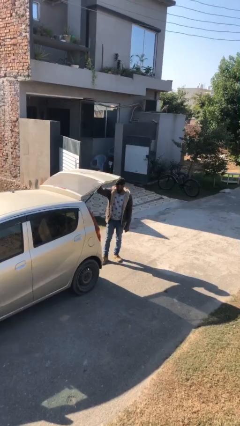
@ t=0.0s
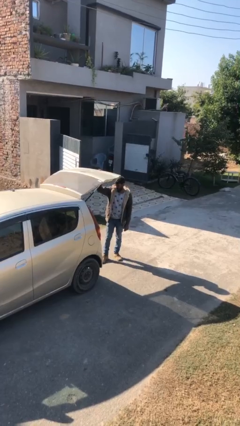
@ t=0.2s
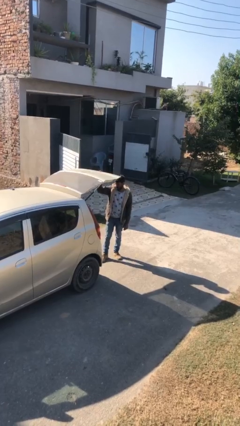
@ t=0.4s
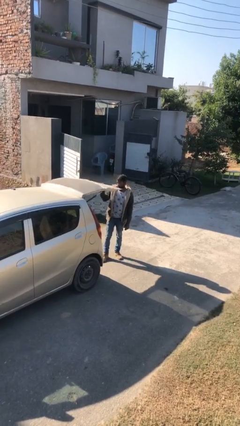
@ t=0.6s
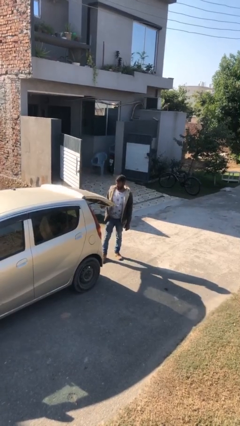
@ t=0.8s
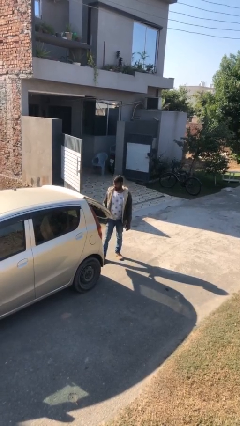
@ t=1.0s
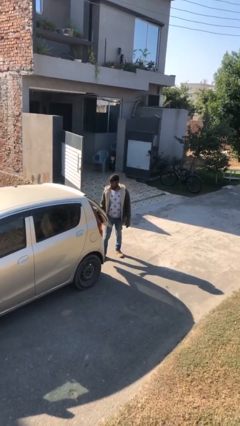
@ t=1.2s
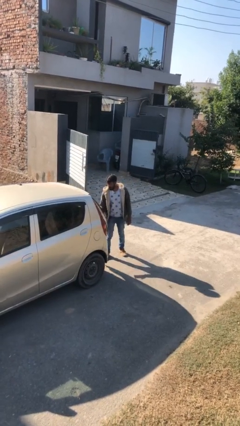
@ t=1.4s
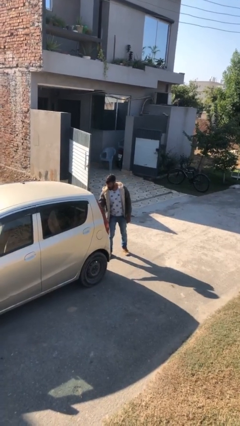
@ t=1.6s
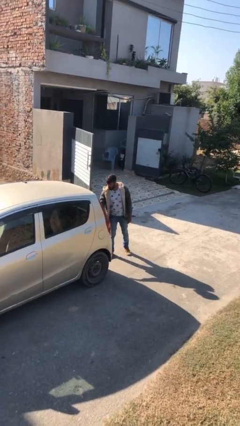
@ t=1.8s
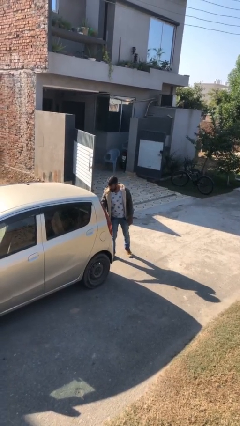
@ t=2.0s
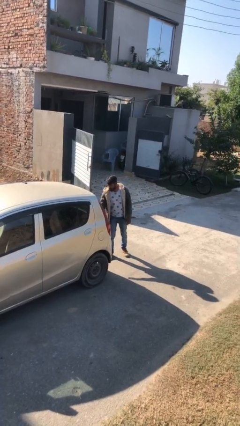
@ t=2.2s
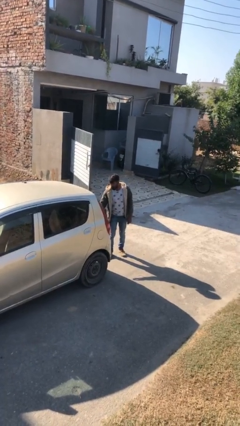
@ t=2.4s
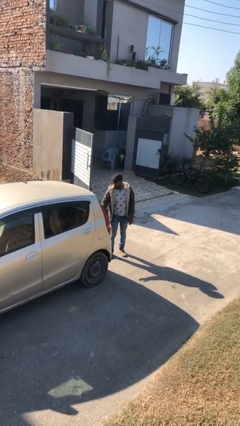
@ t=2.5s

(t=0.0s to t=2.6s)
person closes car trunk

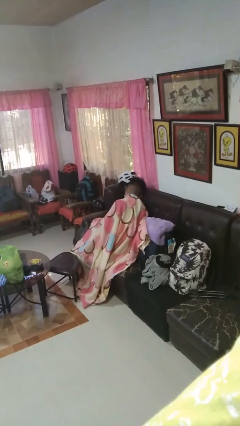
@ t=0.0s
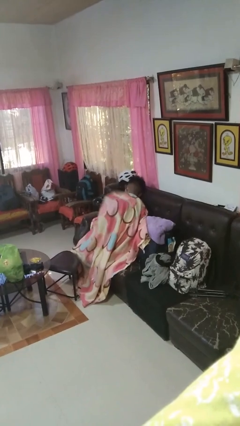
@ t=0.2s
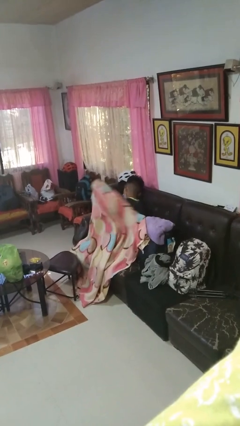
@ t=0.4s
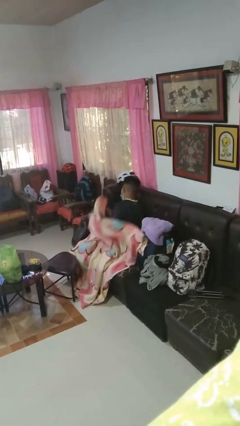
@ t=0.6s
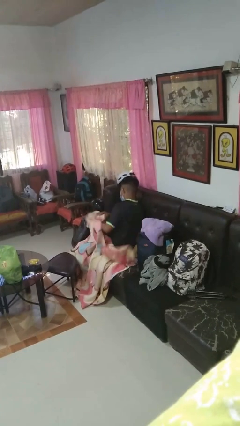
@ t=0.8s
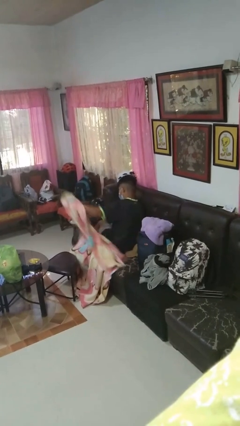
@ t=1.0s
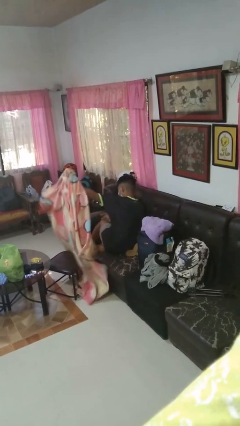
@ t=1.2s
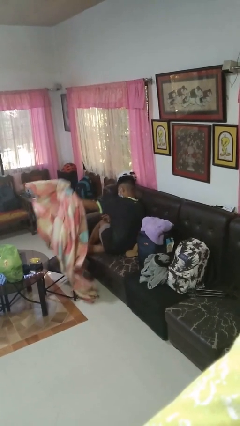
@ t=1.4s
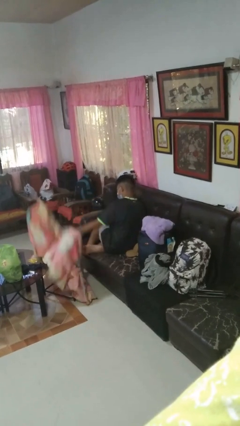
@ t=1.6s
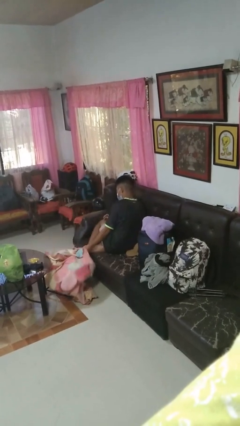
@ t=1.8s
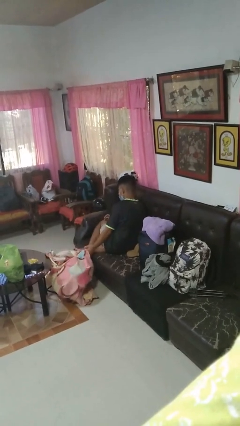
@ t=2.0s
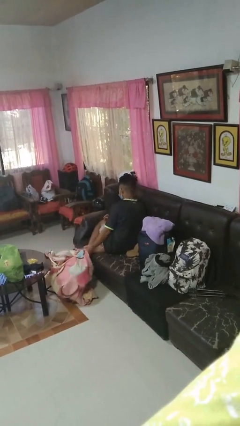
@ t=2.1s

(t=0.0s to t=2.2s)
person uncovers with blanket

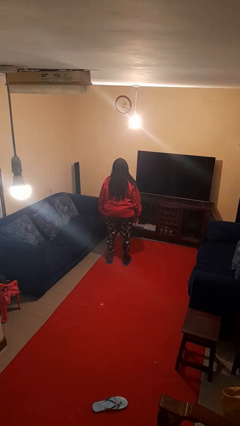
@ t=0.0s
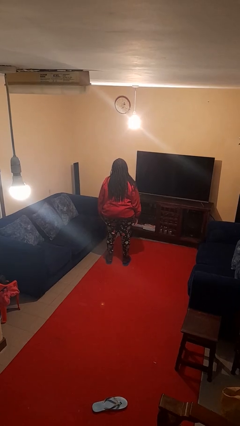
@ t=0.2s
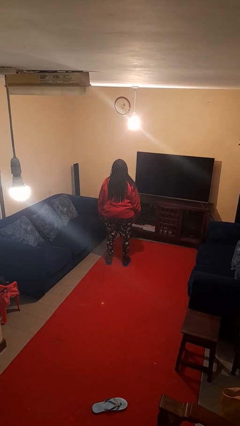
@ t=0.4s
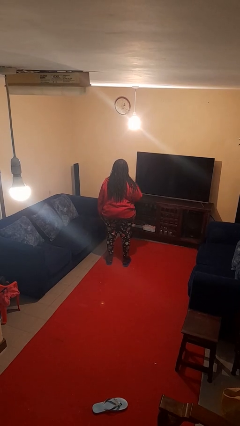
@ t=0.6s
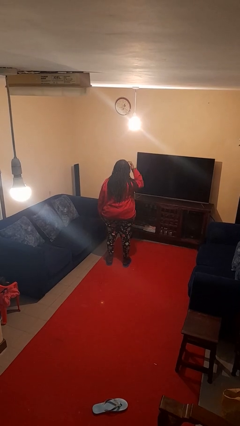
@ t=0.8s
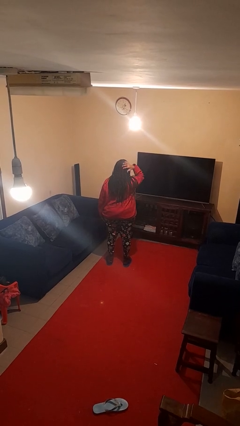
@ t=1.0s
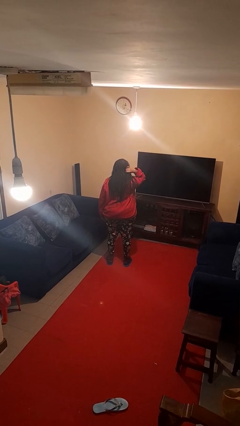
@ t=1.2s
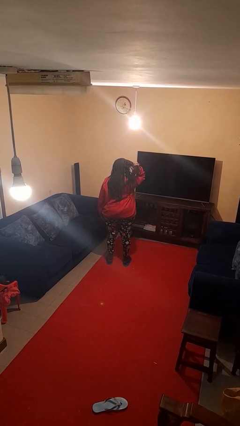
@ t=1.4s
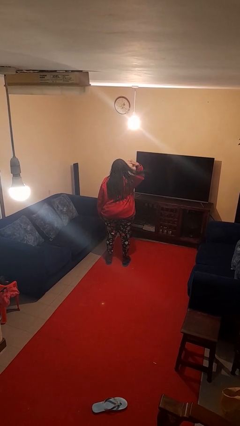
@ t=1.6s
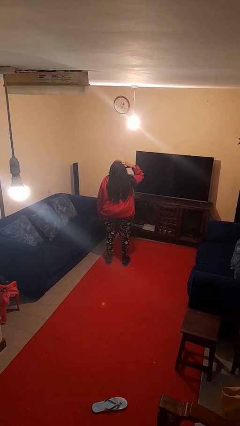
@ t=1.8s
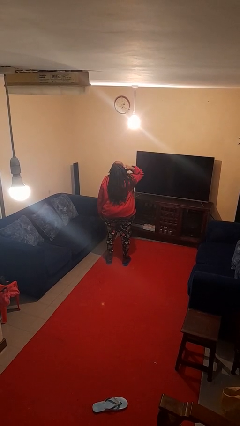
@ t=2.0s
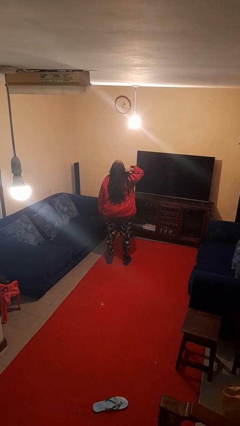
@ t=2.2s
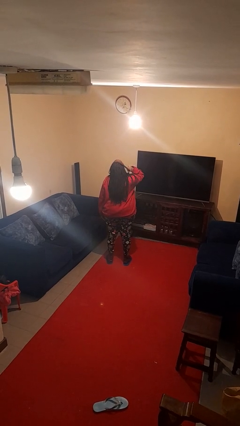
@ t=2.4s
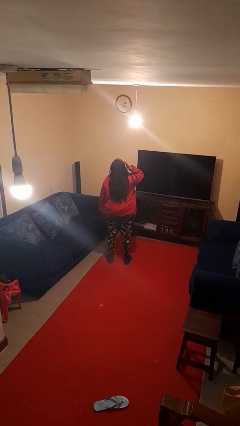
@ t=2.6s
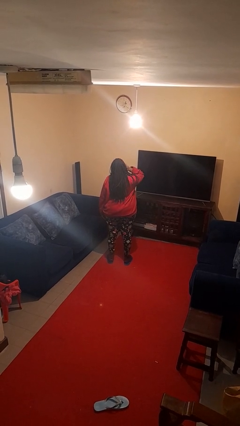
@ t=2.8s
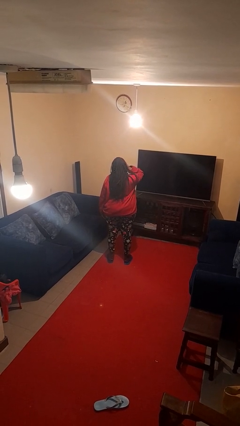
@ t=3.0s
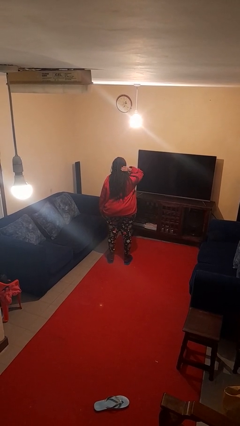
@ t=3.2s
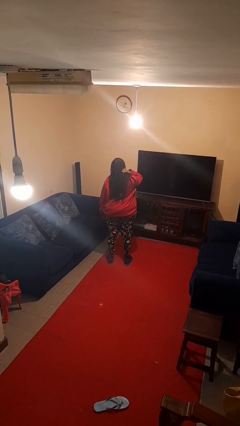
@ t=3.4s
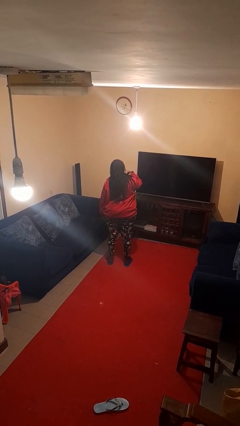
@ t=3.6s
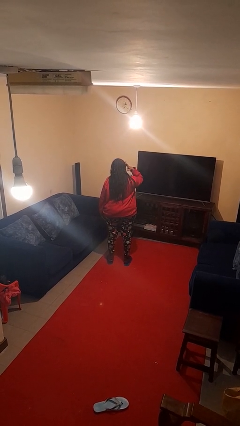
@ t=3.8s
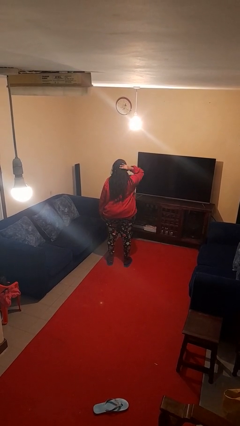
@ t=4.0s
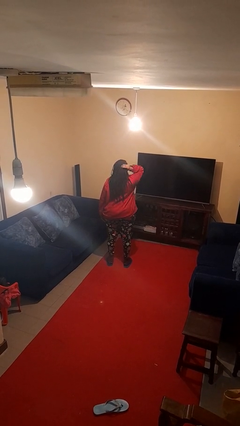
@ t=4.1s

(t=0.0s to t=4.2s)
person strokes hair

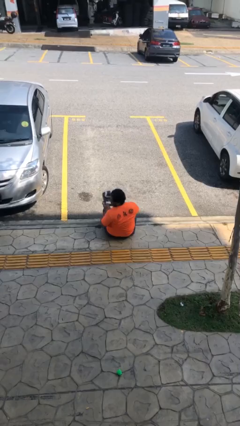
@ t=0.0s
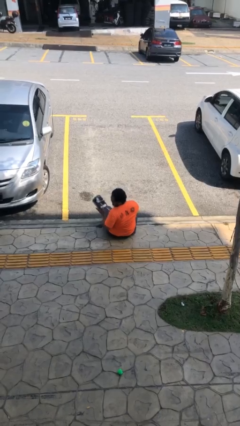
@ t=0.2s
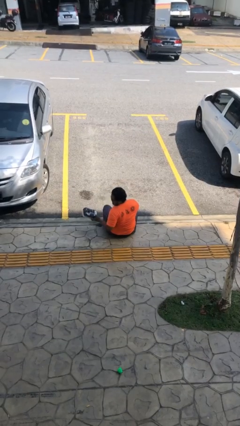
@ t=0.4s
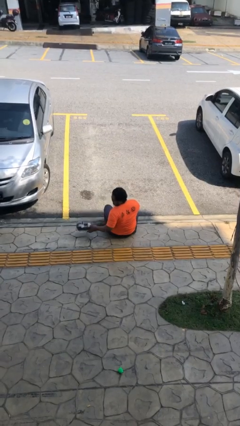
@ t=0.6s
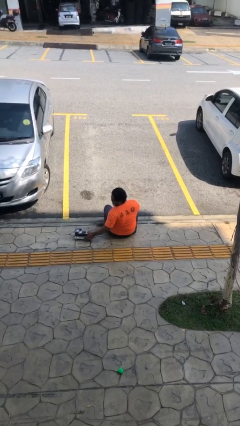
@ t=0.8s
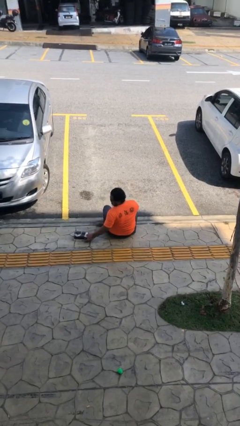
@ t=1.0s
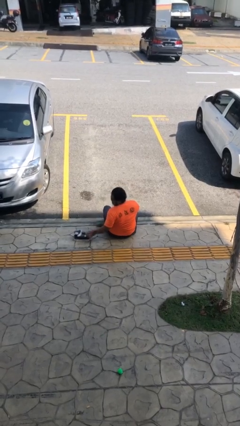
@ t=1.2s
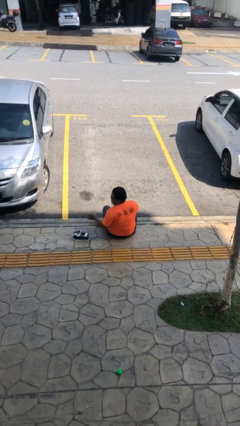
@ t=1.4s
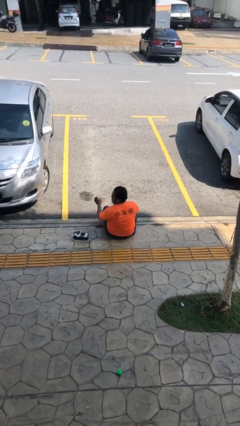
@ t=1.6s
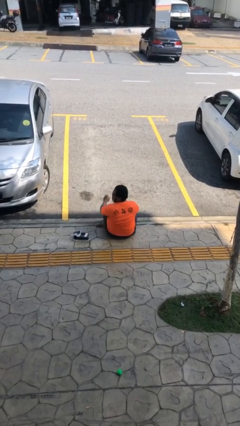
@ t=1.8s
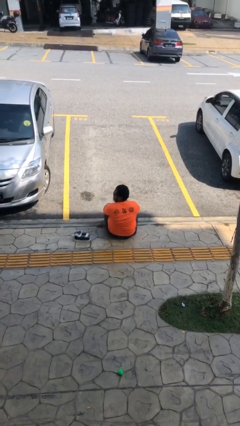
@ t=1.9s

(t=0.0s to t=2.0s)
person puts down object on floor

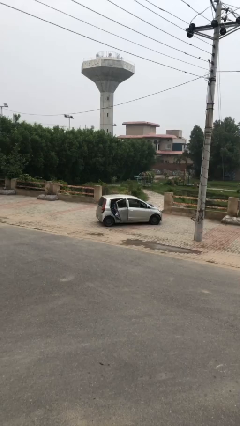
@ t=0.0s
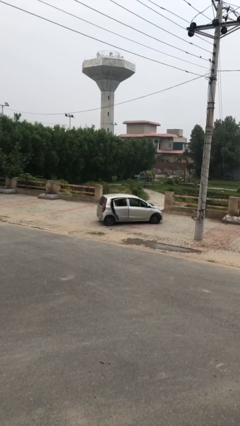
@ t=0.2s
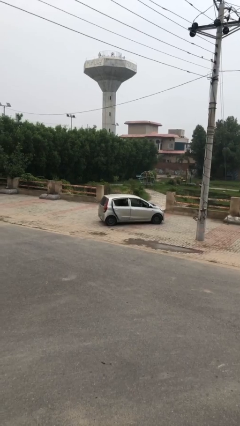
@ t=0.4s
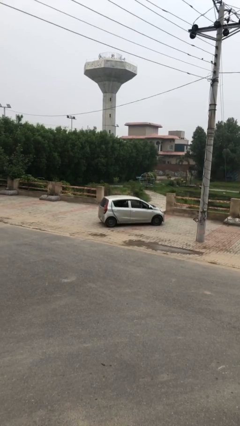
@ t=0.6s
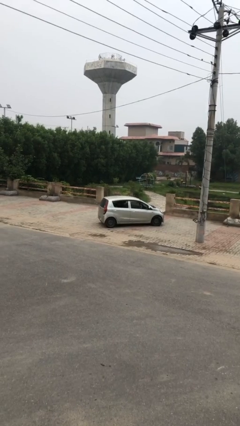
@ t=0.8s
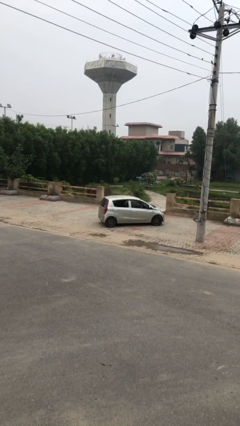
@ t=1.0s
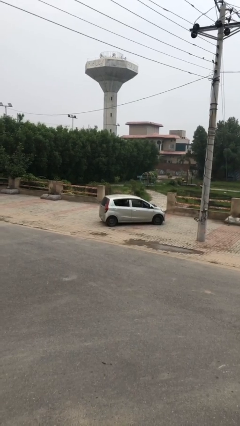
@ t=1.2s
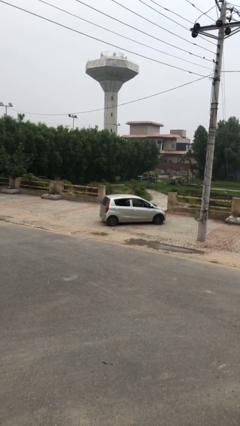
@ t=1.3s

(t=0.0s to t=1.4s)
person closes car door

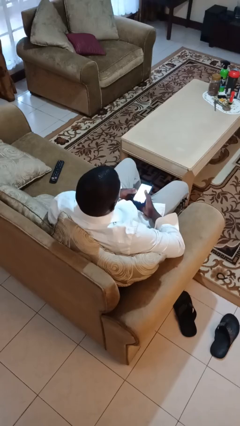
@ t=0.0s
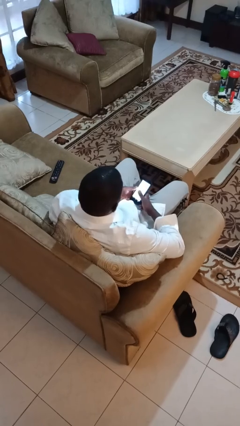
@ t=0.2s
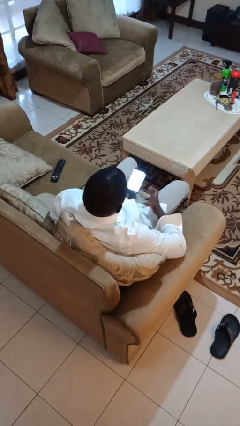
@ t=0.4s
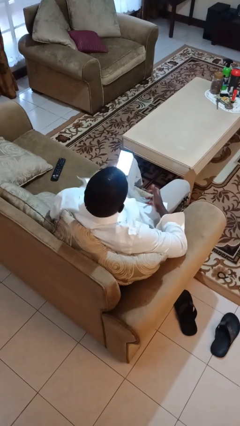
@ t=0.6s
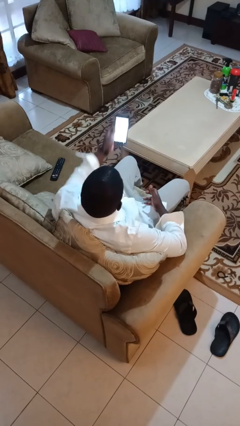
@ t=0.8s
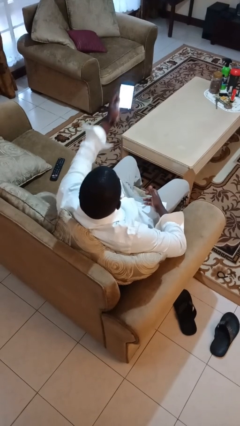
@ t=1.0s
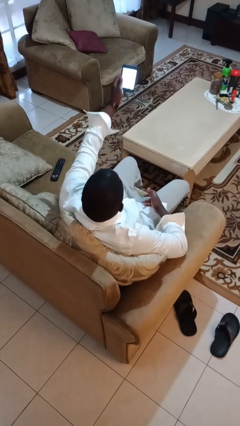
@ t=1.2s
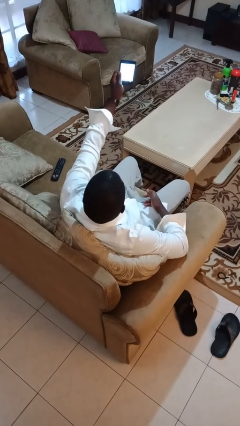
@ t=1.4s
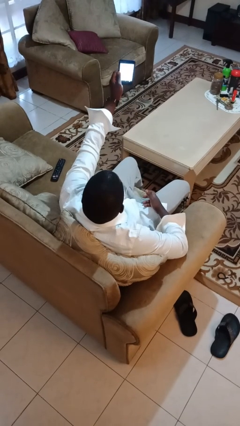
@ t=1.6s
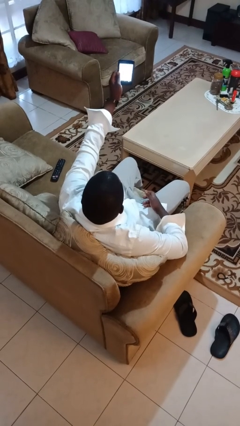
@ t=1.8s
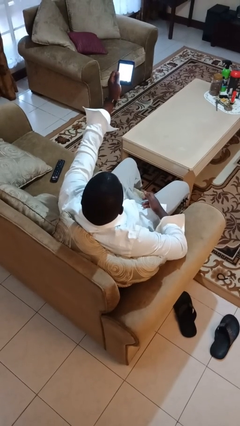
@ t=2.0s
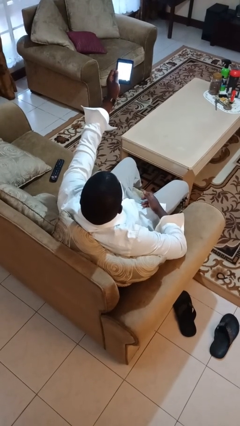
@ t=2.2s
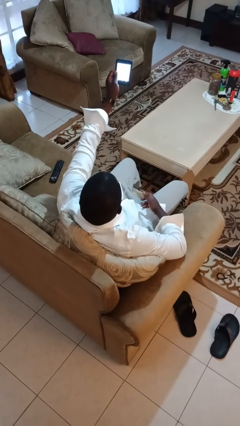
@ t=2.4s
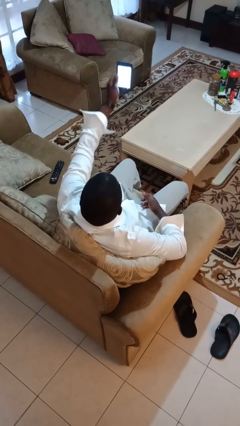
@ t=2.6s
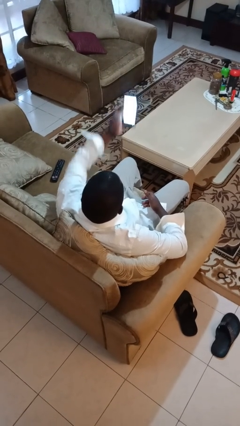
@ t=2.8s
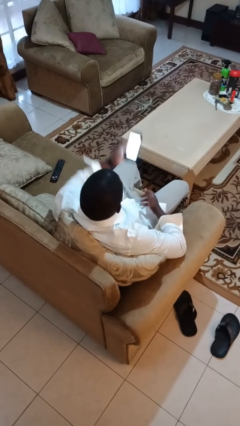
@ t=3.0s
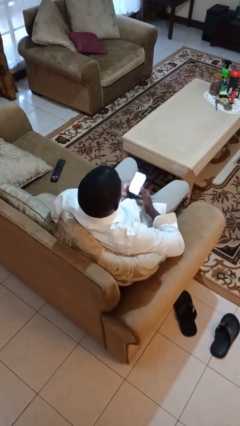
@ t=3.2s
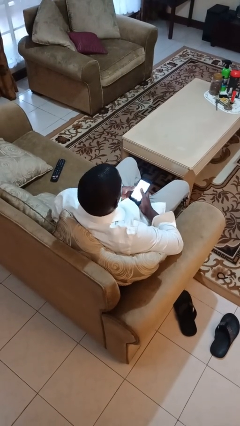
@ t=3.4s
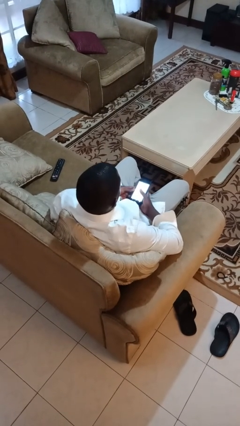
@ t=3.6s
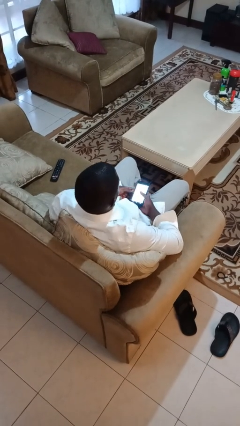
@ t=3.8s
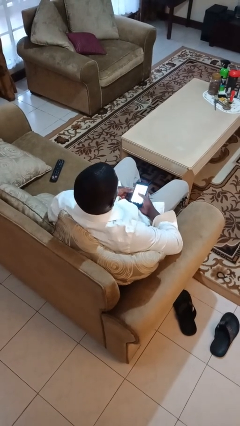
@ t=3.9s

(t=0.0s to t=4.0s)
person takes selfie

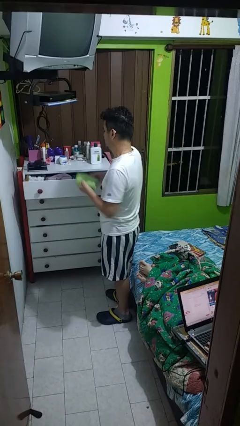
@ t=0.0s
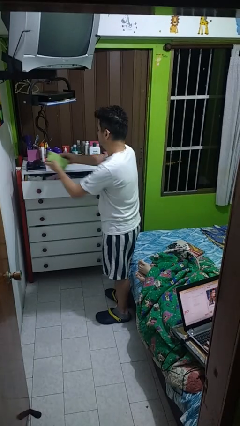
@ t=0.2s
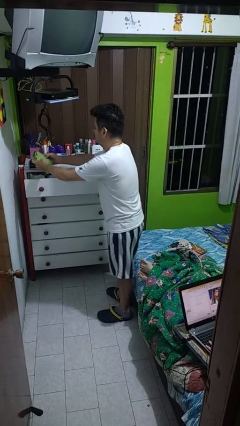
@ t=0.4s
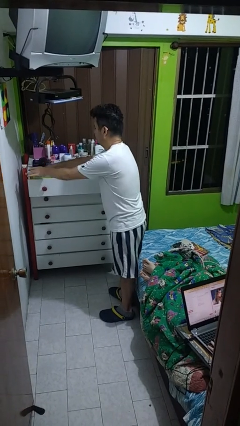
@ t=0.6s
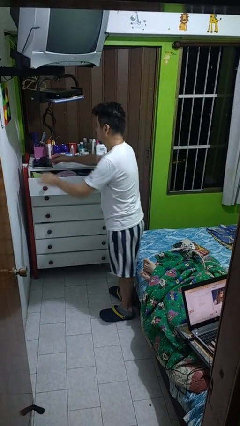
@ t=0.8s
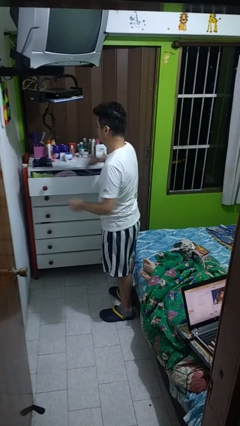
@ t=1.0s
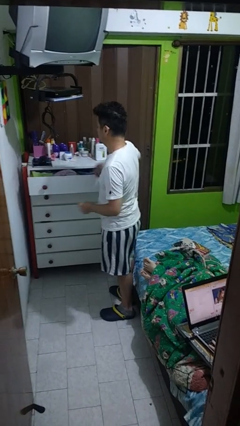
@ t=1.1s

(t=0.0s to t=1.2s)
person puts clothes into dresser
